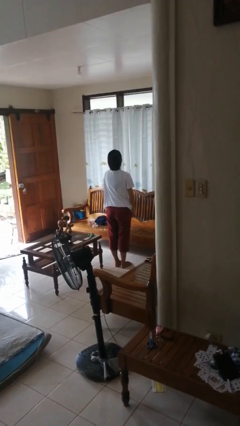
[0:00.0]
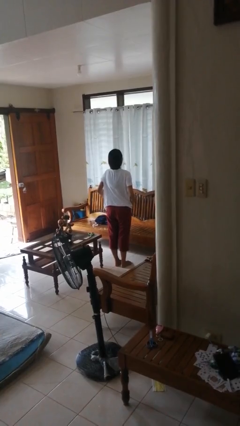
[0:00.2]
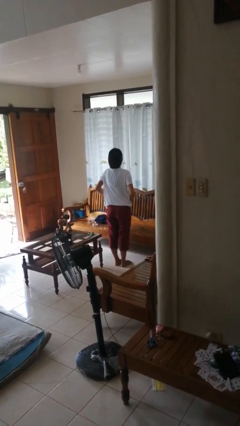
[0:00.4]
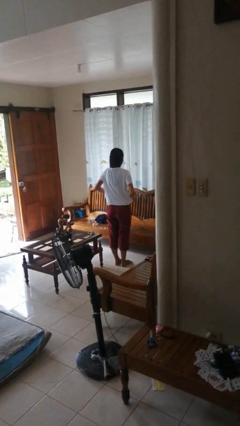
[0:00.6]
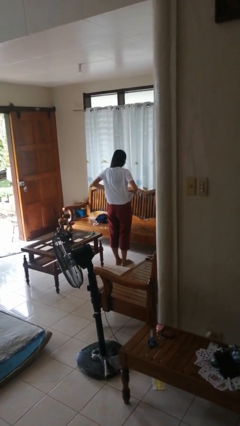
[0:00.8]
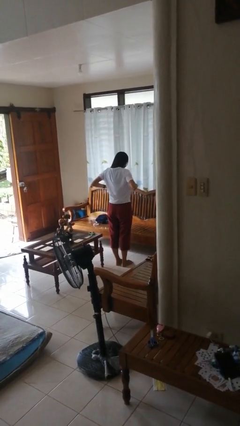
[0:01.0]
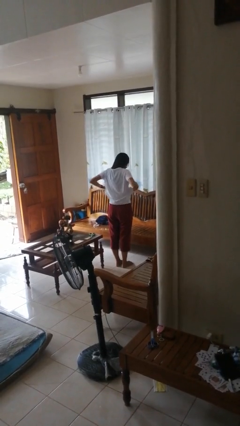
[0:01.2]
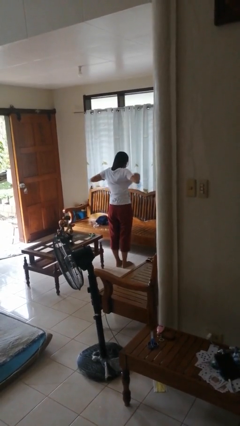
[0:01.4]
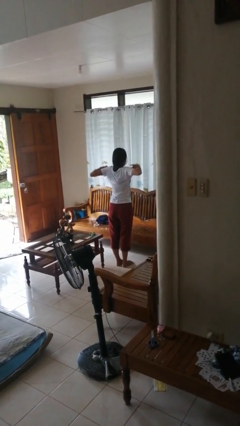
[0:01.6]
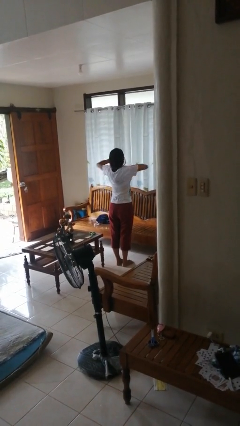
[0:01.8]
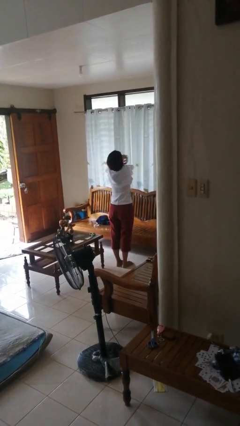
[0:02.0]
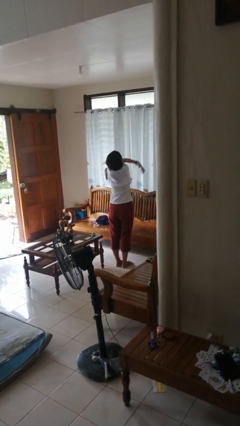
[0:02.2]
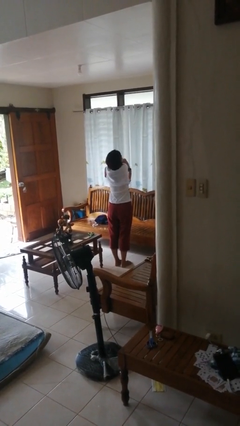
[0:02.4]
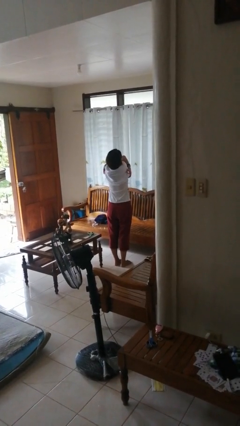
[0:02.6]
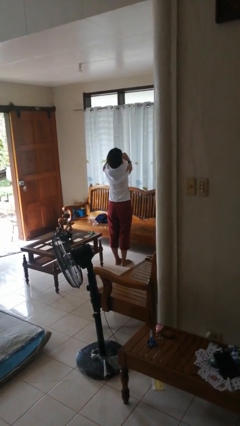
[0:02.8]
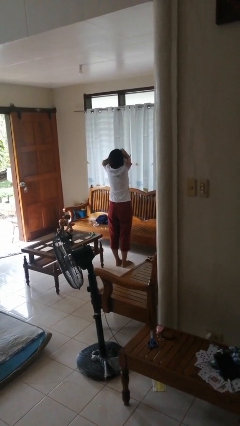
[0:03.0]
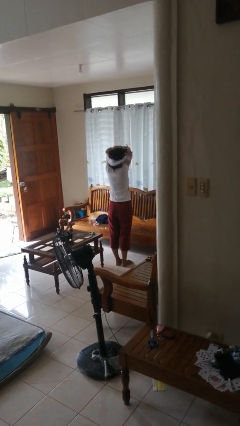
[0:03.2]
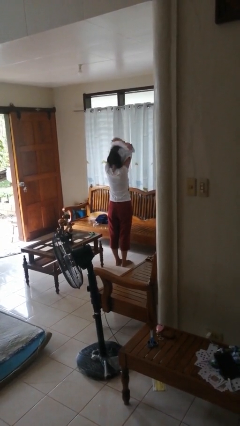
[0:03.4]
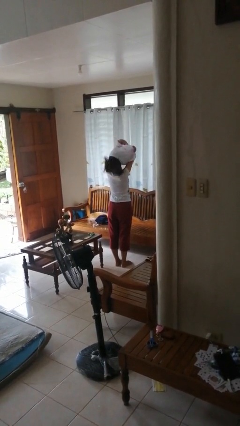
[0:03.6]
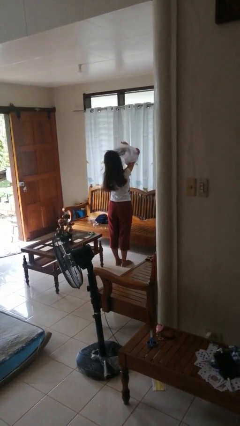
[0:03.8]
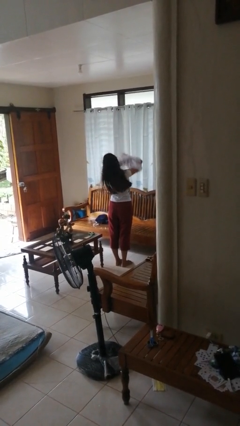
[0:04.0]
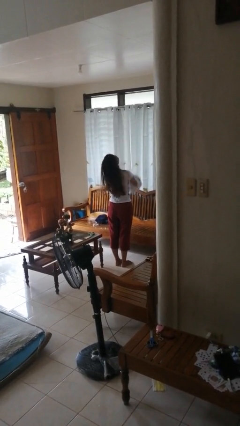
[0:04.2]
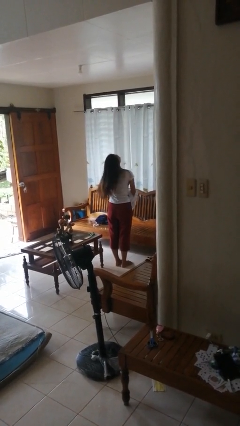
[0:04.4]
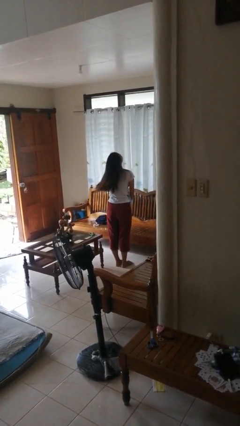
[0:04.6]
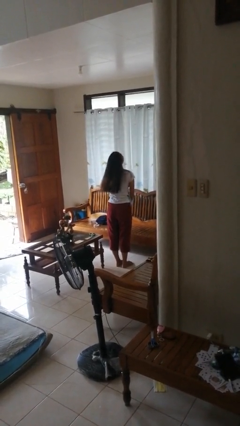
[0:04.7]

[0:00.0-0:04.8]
person takes off shirt

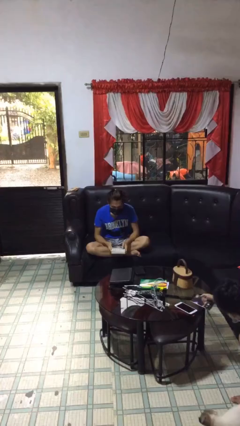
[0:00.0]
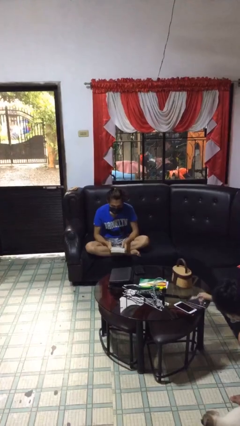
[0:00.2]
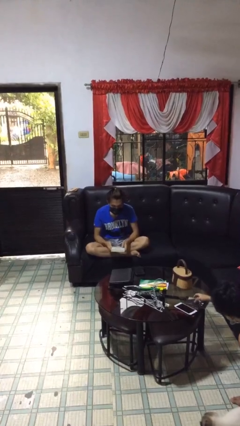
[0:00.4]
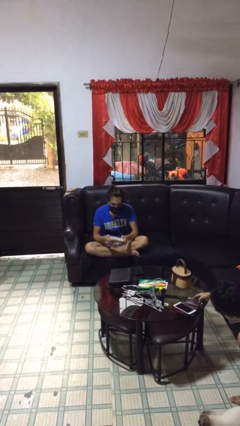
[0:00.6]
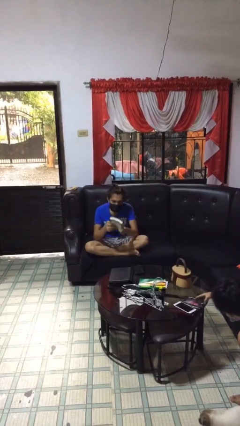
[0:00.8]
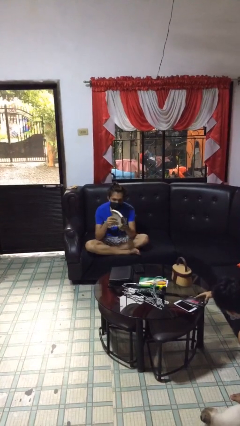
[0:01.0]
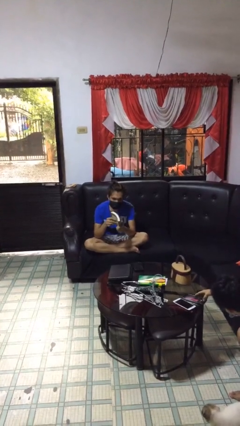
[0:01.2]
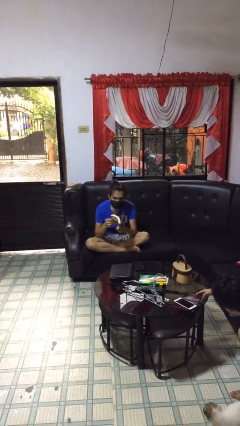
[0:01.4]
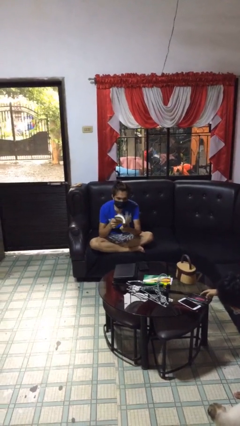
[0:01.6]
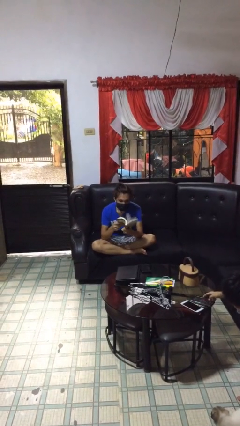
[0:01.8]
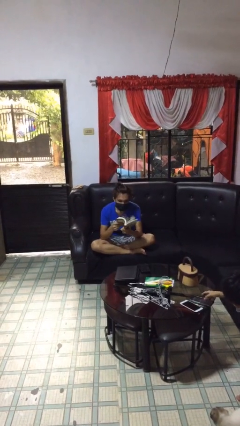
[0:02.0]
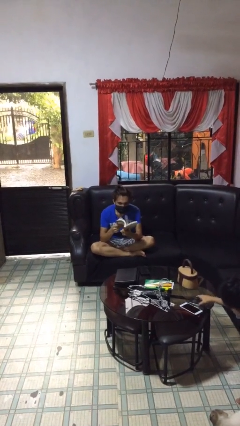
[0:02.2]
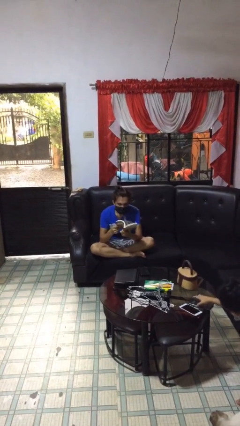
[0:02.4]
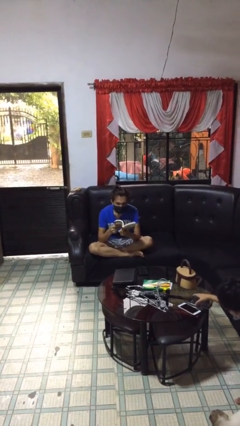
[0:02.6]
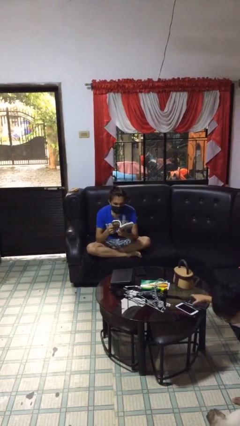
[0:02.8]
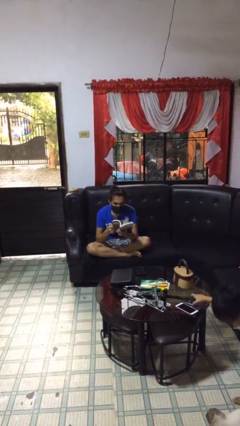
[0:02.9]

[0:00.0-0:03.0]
person reads document

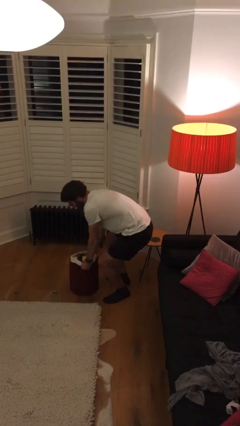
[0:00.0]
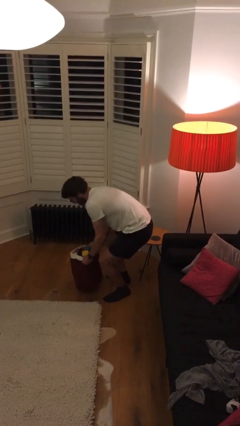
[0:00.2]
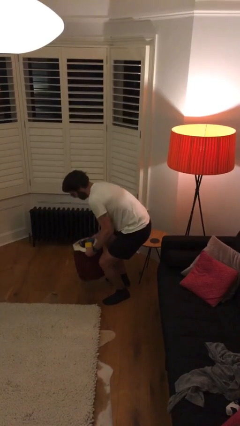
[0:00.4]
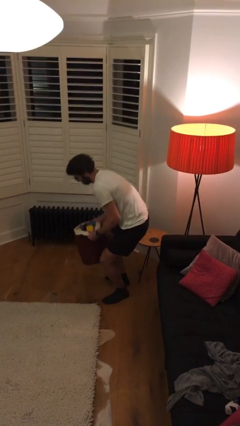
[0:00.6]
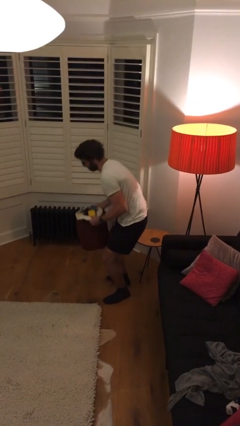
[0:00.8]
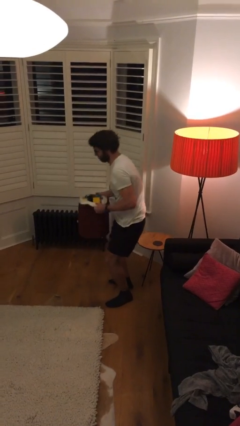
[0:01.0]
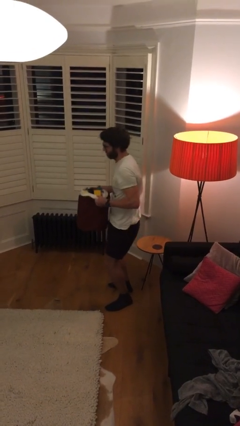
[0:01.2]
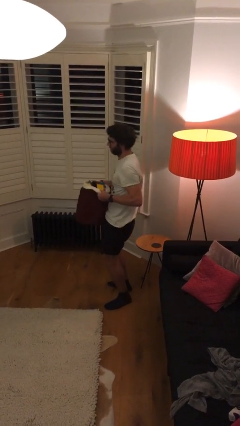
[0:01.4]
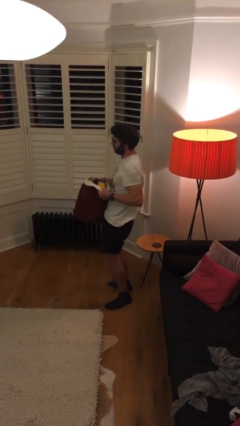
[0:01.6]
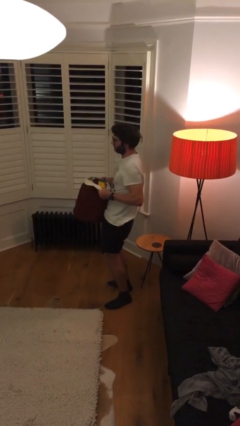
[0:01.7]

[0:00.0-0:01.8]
person picks up object from floor

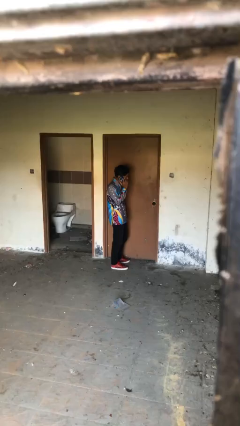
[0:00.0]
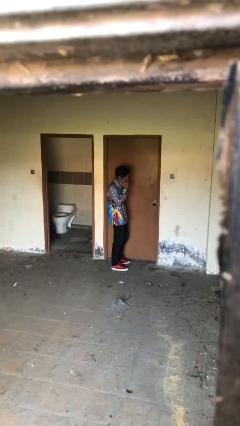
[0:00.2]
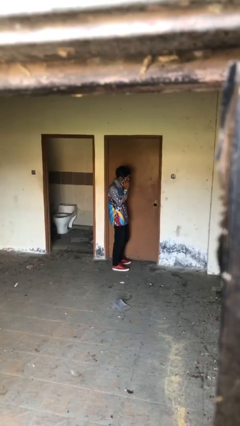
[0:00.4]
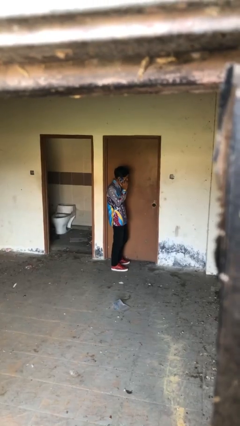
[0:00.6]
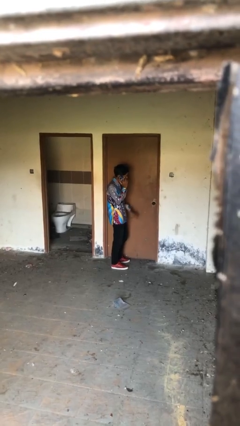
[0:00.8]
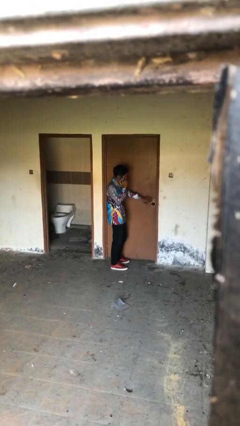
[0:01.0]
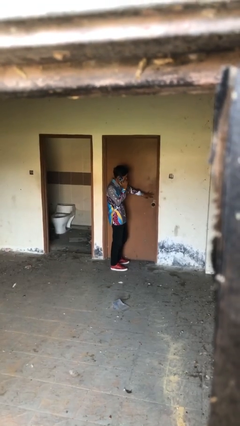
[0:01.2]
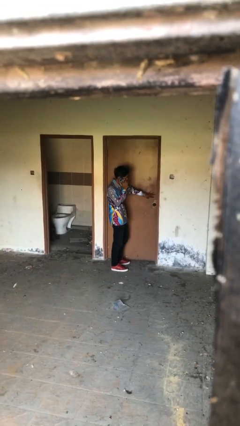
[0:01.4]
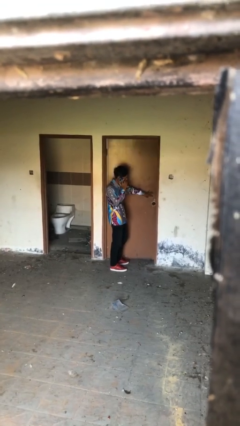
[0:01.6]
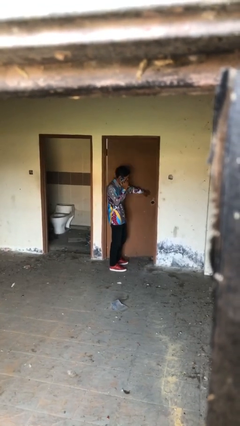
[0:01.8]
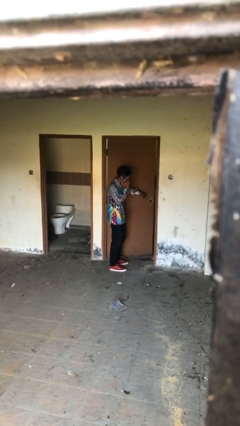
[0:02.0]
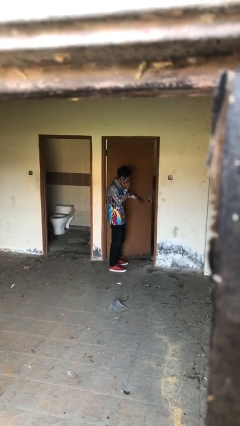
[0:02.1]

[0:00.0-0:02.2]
person opens facility door

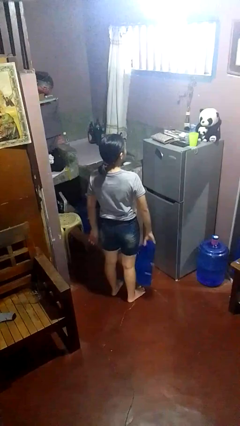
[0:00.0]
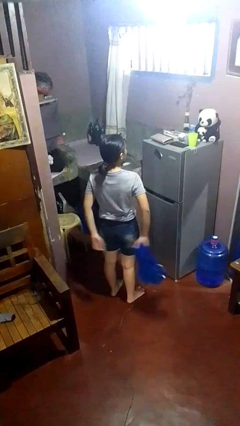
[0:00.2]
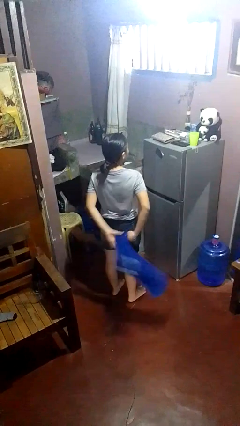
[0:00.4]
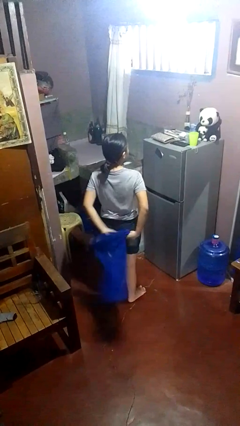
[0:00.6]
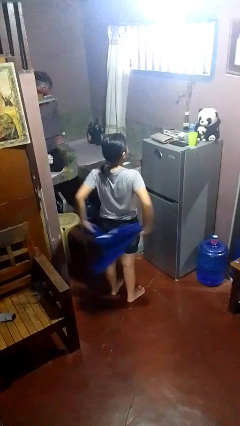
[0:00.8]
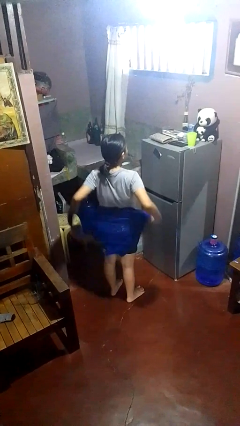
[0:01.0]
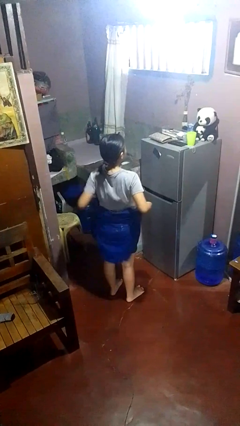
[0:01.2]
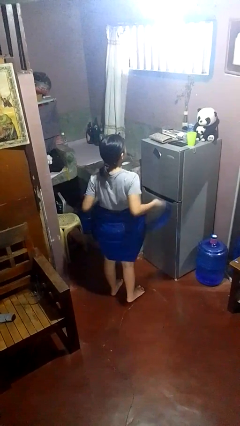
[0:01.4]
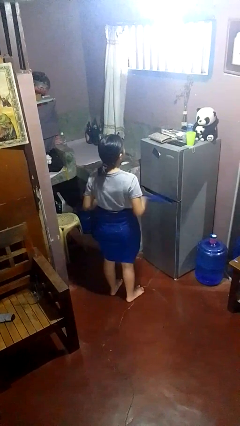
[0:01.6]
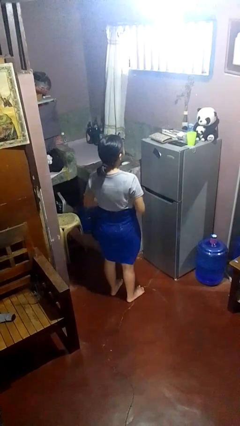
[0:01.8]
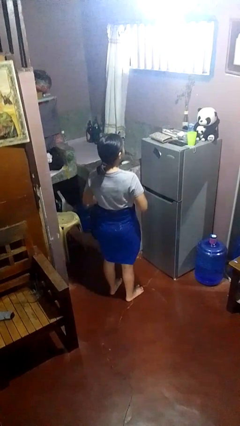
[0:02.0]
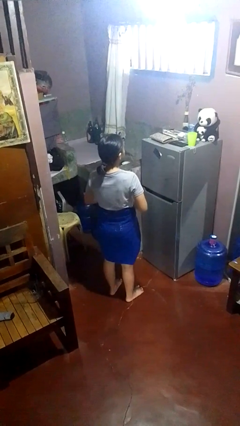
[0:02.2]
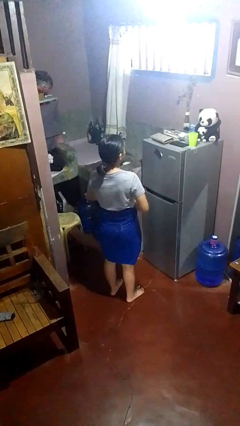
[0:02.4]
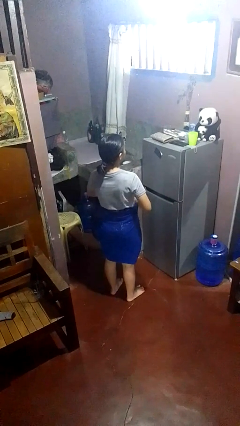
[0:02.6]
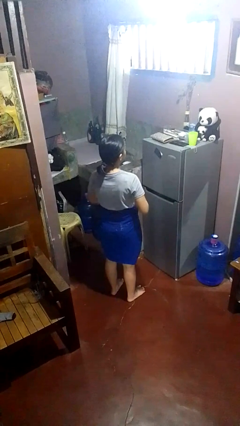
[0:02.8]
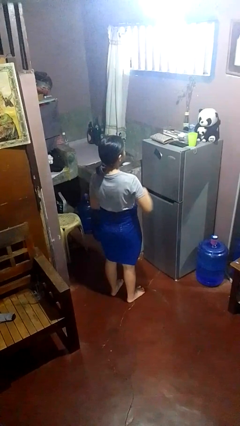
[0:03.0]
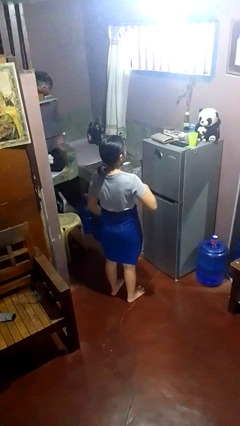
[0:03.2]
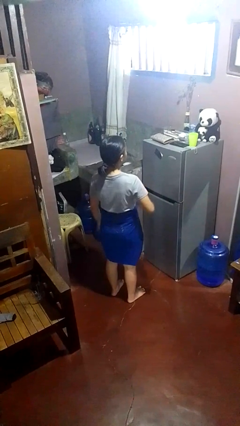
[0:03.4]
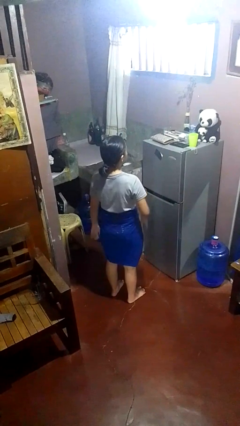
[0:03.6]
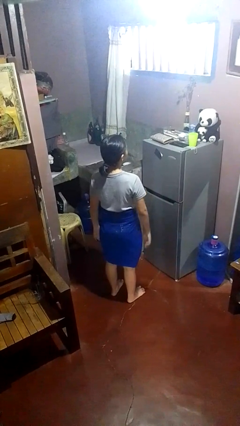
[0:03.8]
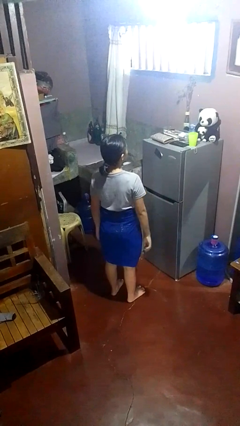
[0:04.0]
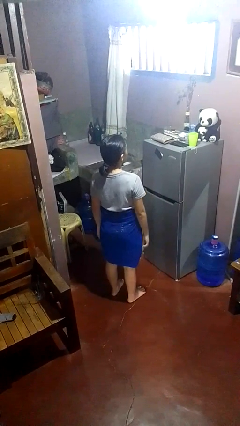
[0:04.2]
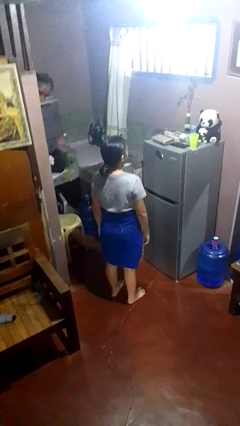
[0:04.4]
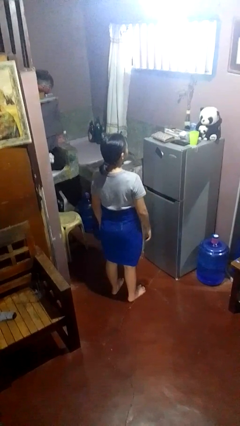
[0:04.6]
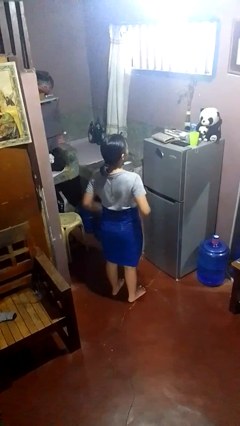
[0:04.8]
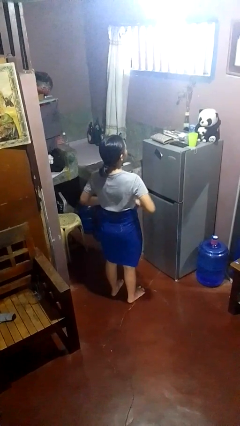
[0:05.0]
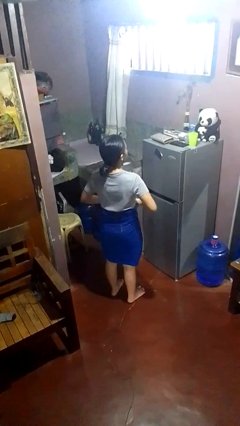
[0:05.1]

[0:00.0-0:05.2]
person ties jacket around waist

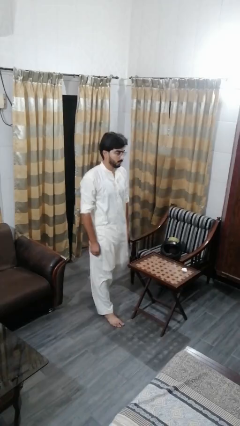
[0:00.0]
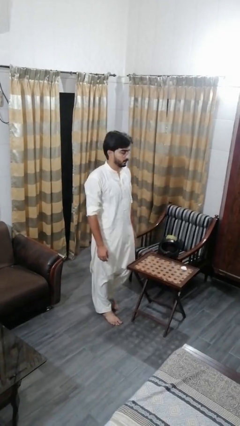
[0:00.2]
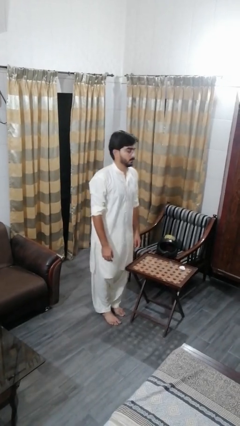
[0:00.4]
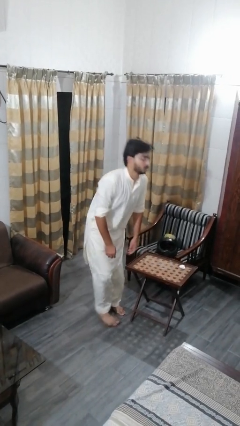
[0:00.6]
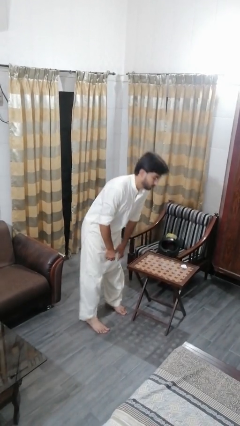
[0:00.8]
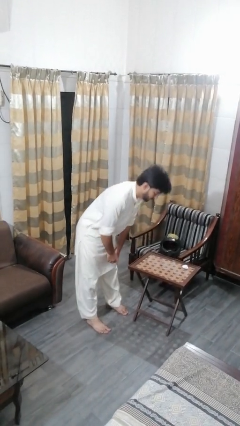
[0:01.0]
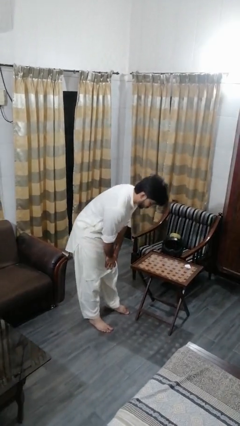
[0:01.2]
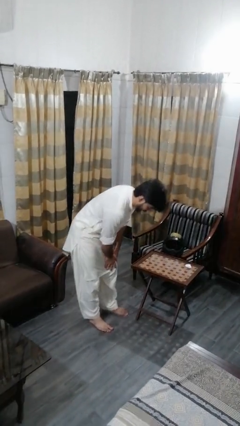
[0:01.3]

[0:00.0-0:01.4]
person bumps into table
